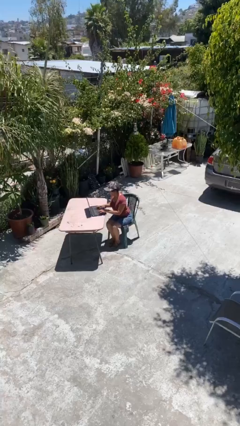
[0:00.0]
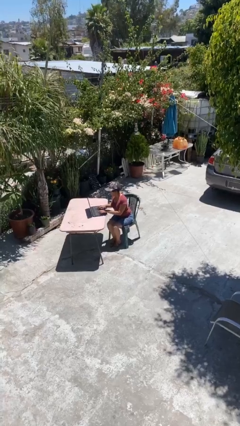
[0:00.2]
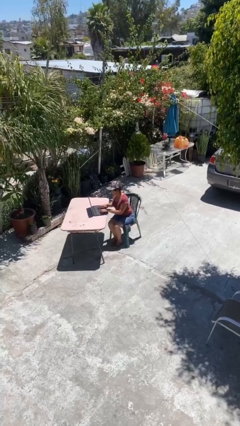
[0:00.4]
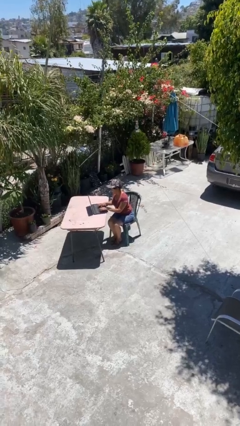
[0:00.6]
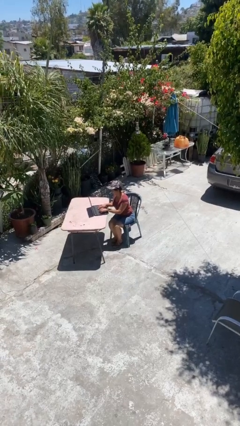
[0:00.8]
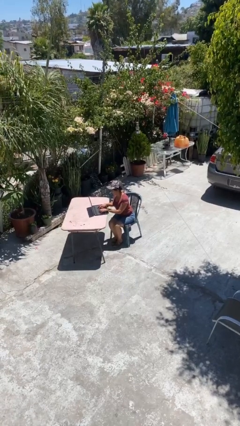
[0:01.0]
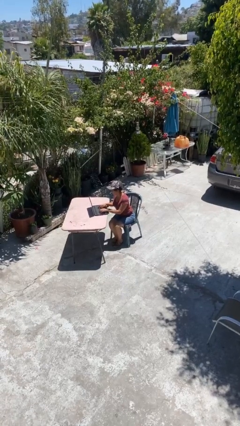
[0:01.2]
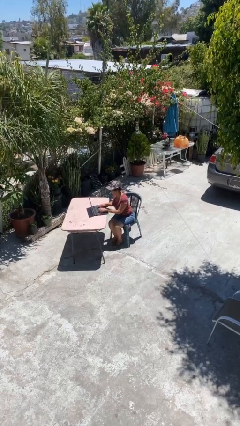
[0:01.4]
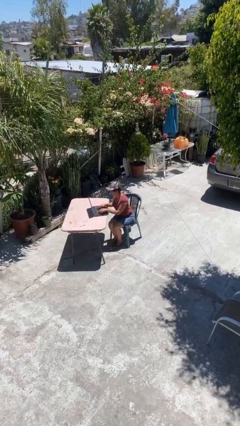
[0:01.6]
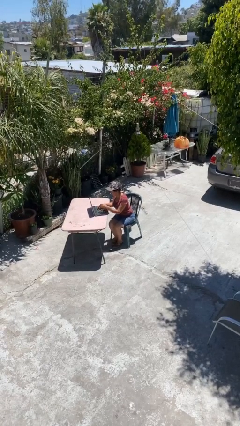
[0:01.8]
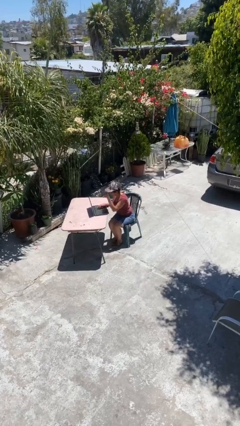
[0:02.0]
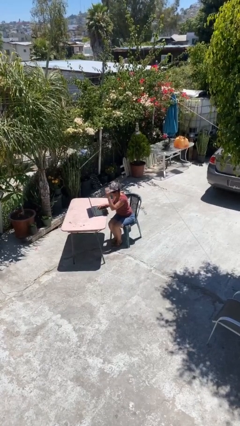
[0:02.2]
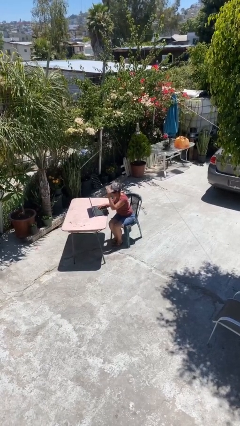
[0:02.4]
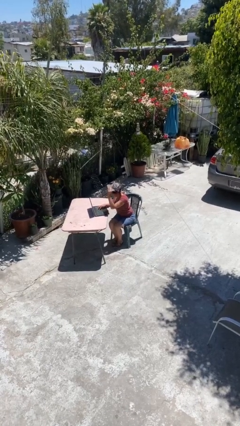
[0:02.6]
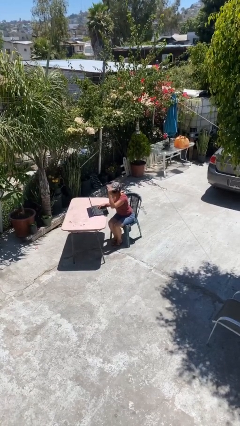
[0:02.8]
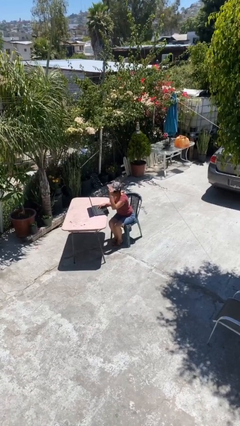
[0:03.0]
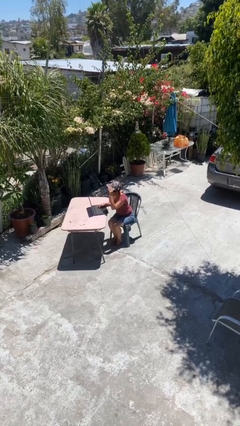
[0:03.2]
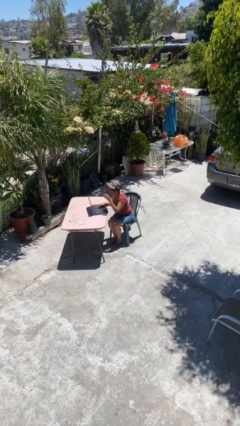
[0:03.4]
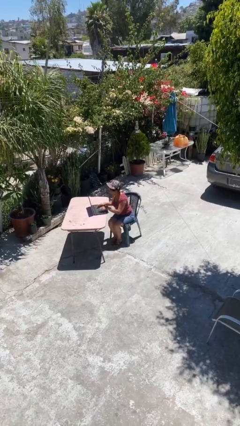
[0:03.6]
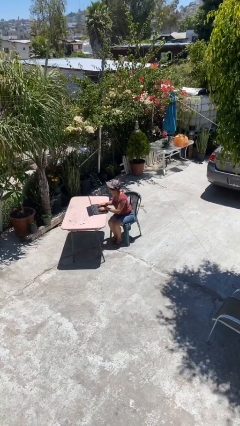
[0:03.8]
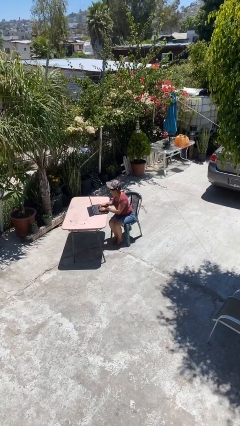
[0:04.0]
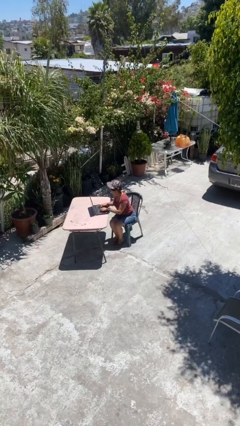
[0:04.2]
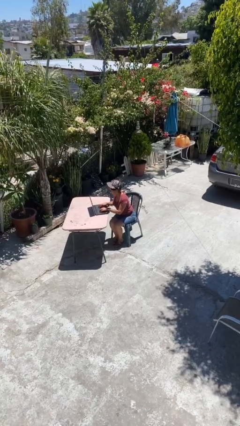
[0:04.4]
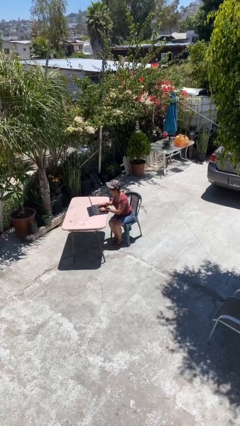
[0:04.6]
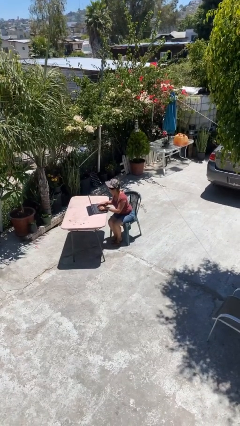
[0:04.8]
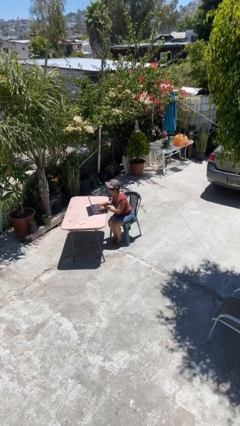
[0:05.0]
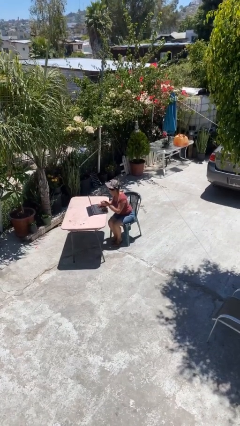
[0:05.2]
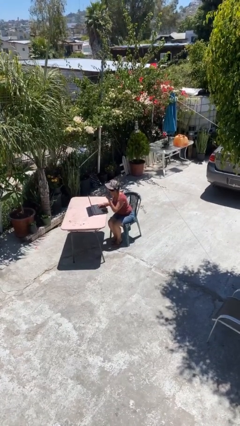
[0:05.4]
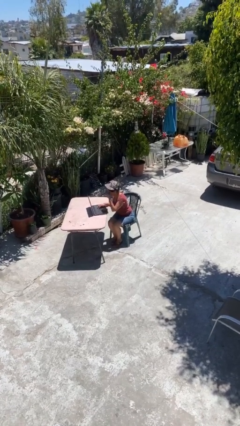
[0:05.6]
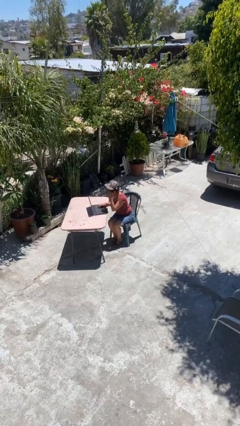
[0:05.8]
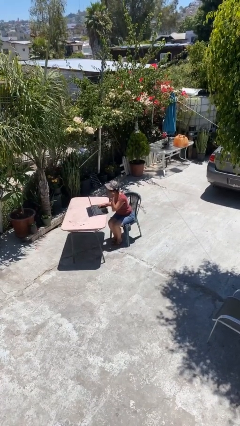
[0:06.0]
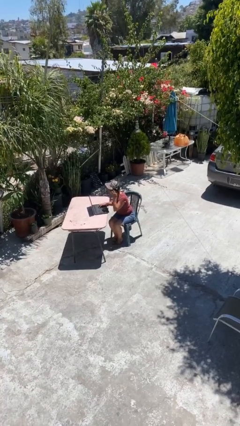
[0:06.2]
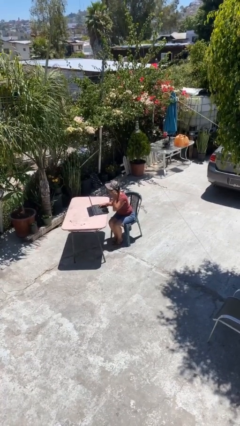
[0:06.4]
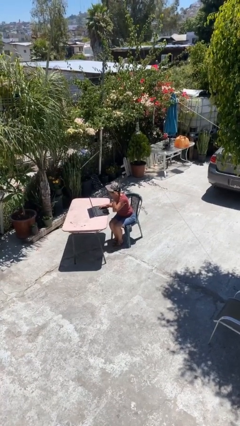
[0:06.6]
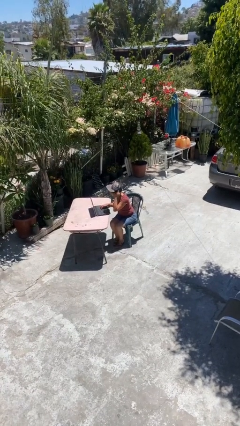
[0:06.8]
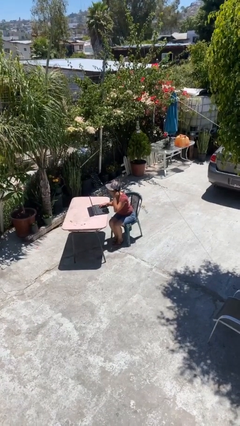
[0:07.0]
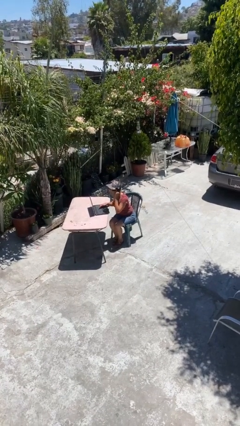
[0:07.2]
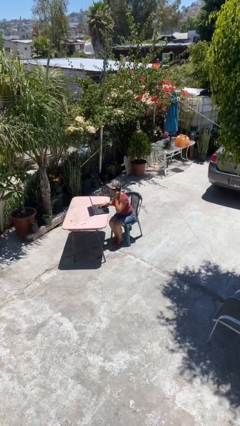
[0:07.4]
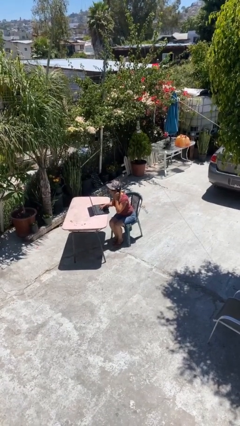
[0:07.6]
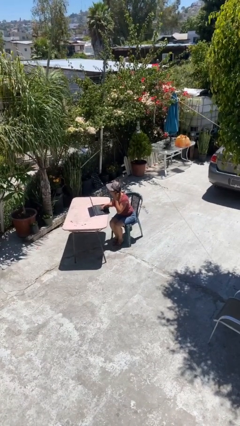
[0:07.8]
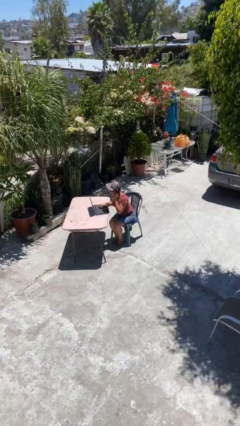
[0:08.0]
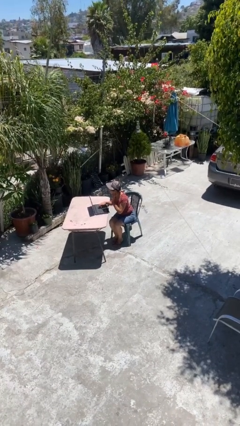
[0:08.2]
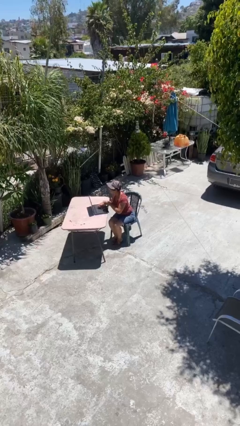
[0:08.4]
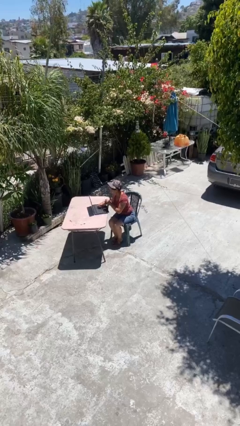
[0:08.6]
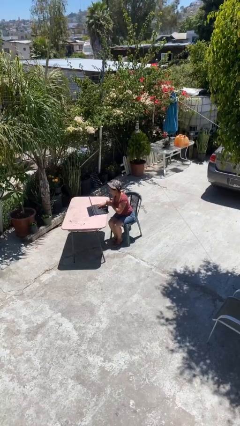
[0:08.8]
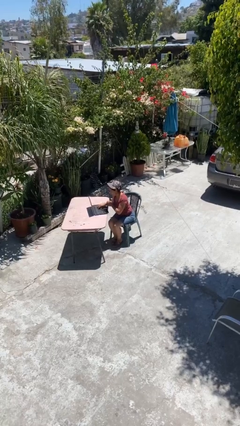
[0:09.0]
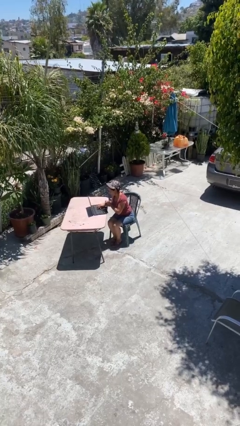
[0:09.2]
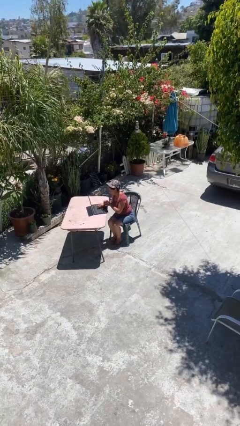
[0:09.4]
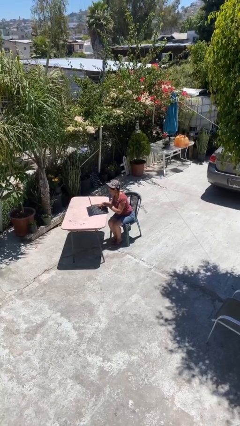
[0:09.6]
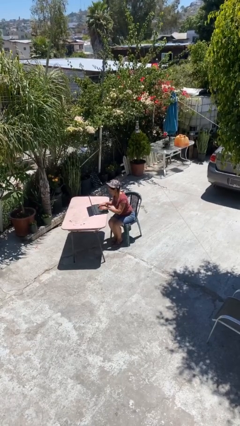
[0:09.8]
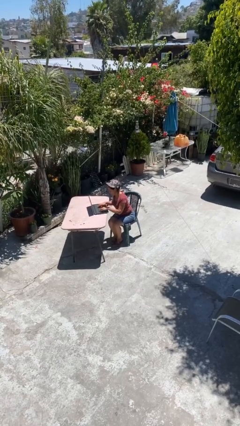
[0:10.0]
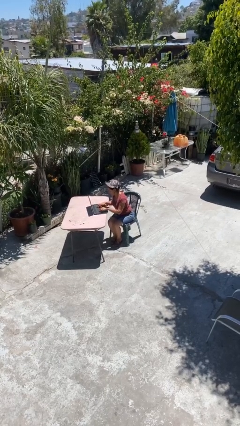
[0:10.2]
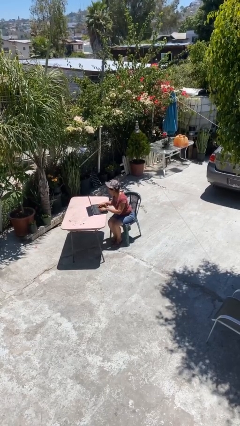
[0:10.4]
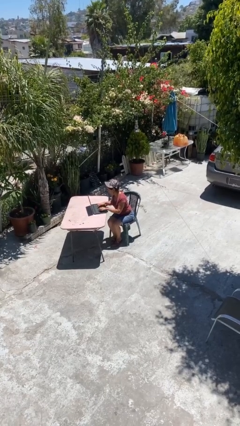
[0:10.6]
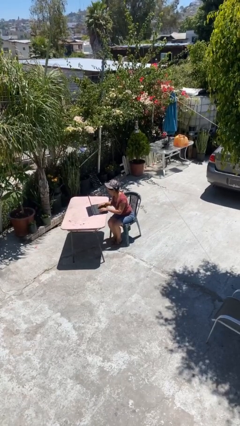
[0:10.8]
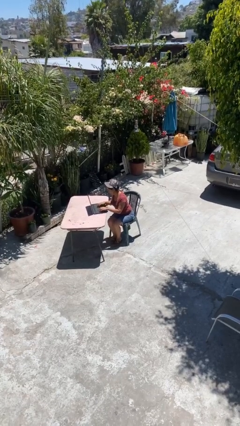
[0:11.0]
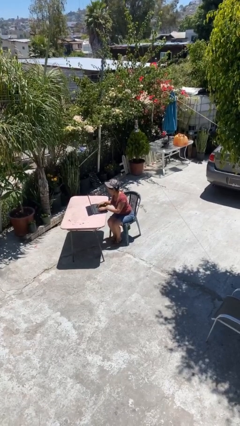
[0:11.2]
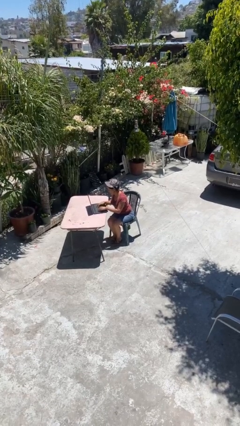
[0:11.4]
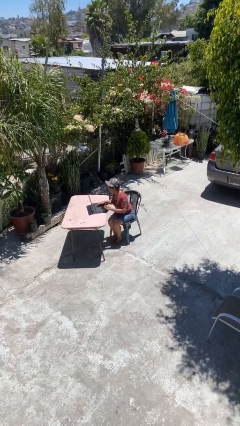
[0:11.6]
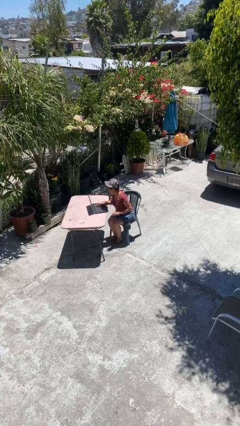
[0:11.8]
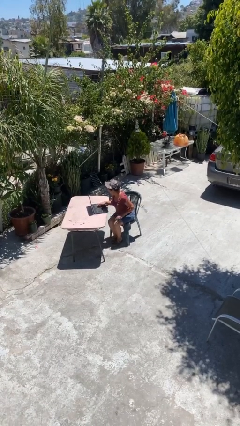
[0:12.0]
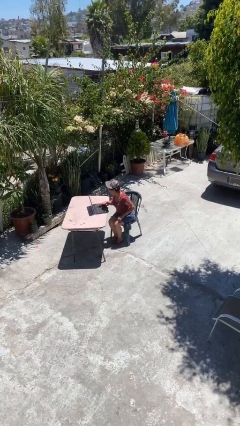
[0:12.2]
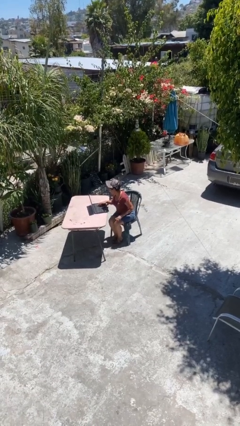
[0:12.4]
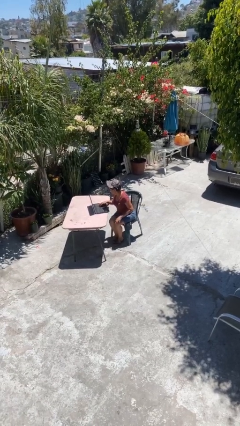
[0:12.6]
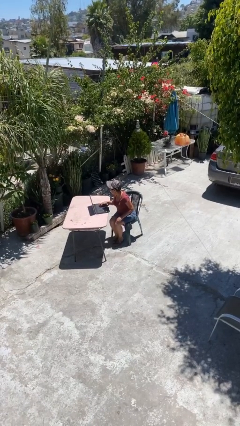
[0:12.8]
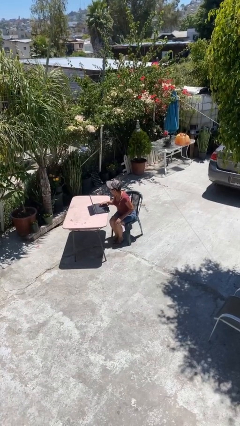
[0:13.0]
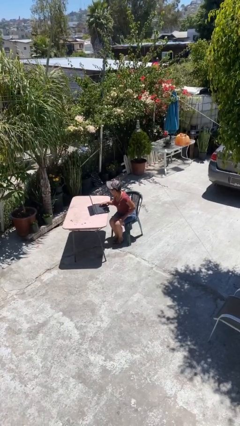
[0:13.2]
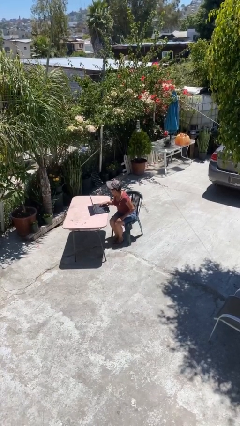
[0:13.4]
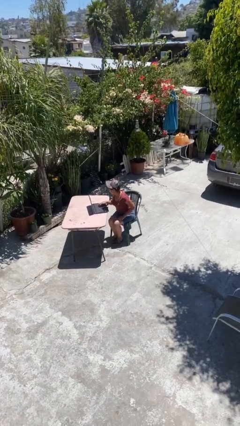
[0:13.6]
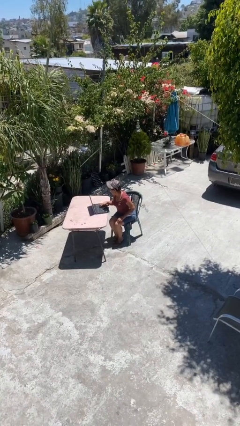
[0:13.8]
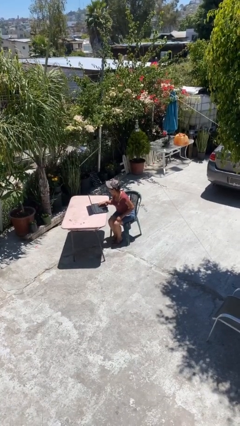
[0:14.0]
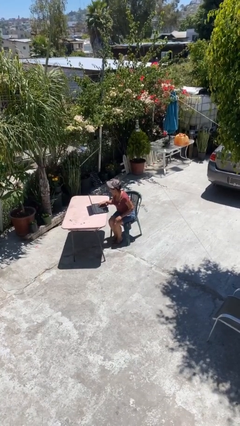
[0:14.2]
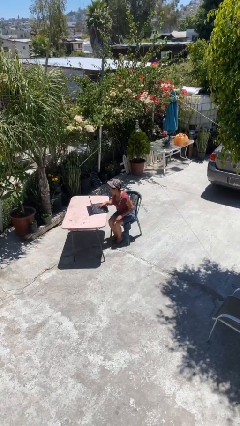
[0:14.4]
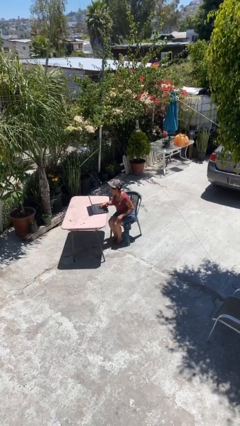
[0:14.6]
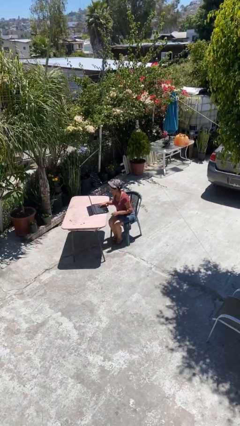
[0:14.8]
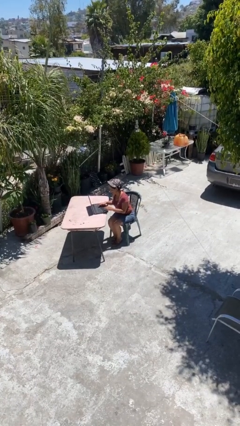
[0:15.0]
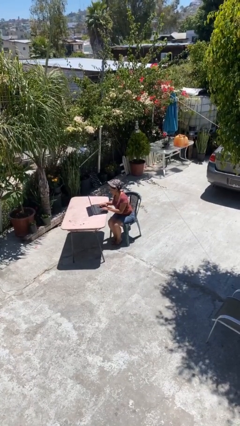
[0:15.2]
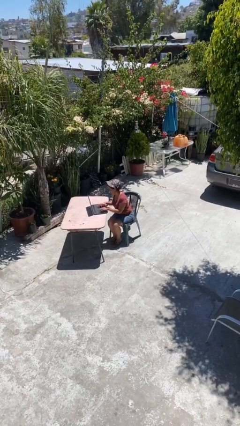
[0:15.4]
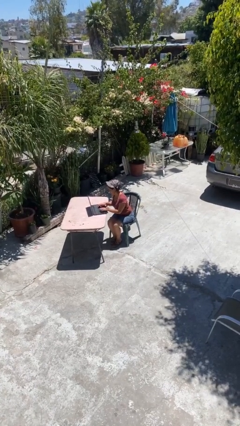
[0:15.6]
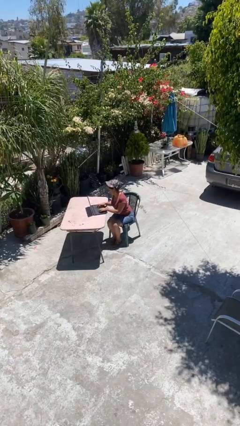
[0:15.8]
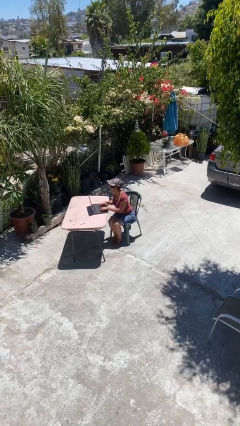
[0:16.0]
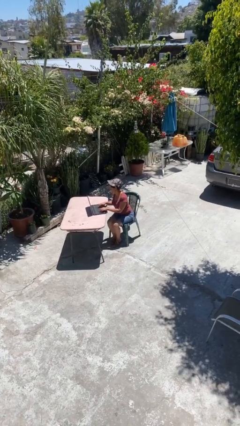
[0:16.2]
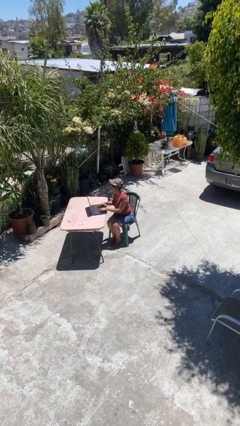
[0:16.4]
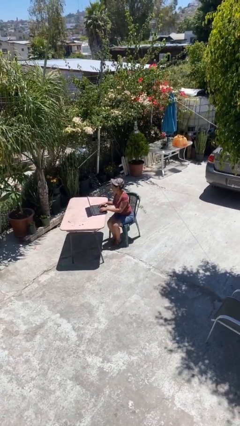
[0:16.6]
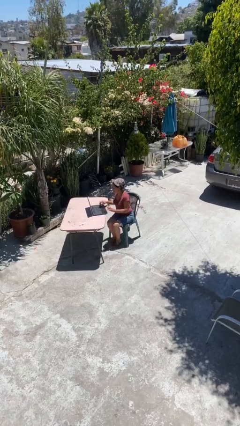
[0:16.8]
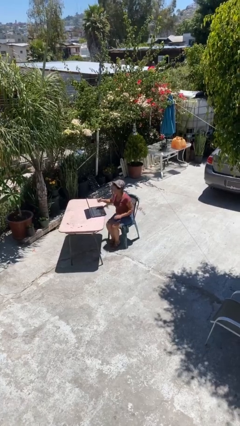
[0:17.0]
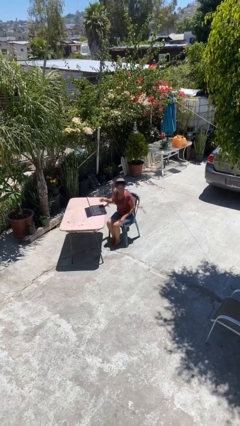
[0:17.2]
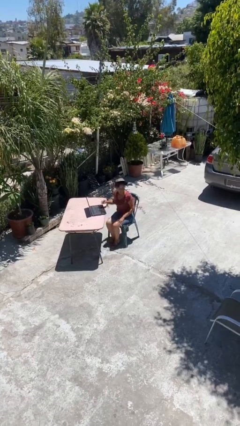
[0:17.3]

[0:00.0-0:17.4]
person interacts with laptop

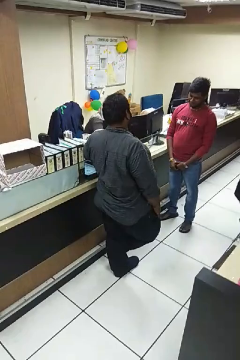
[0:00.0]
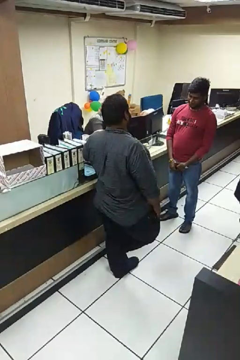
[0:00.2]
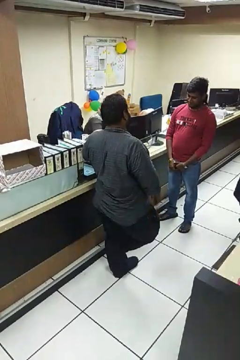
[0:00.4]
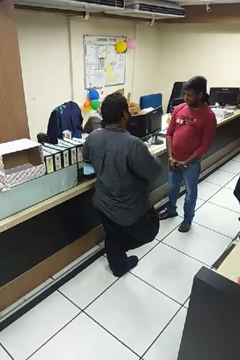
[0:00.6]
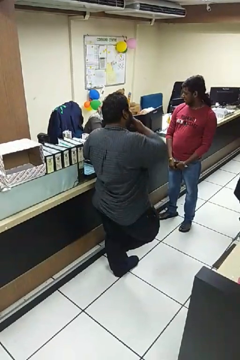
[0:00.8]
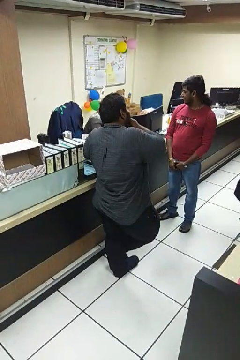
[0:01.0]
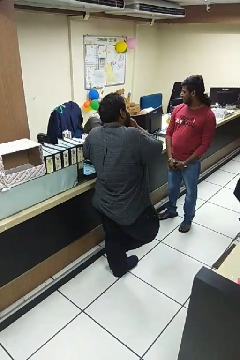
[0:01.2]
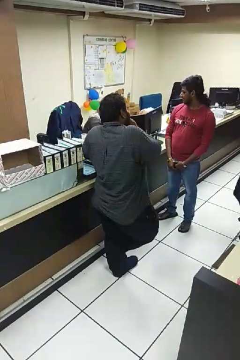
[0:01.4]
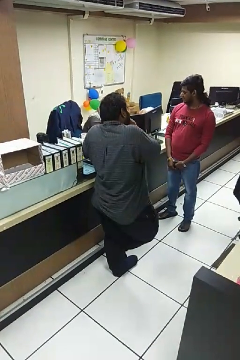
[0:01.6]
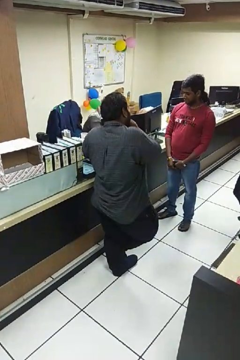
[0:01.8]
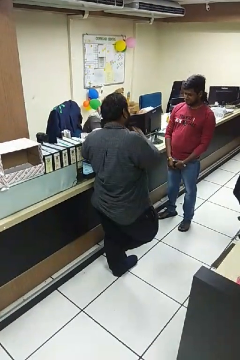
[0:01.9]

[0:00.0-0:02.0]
person laughs with person
